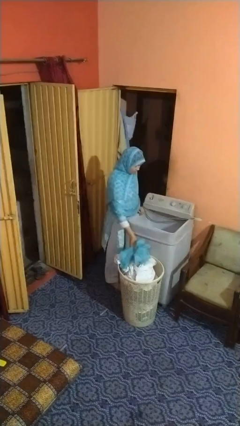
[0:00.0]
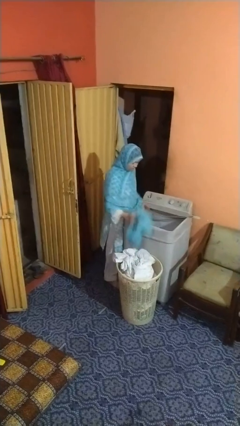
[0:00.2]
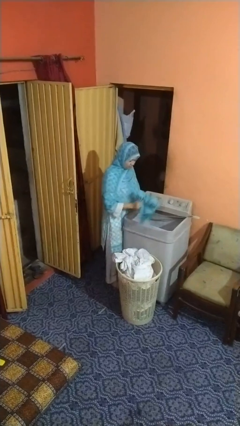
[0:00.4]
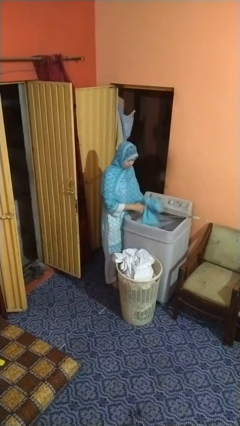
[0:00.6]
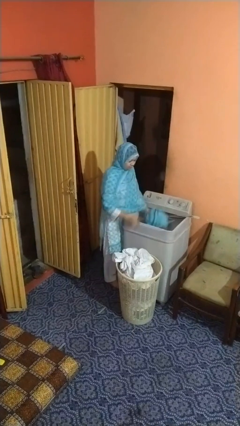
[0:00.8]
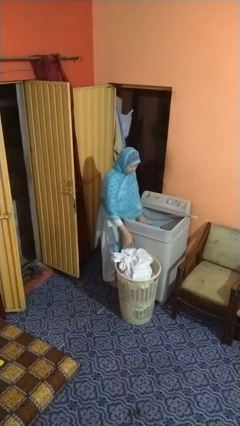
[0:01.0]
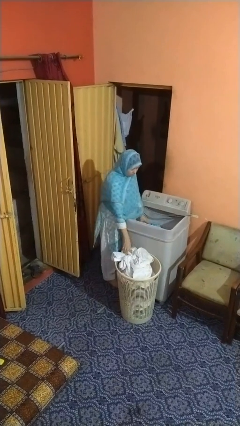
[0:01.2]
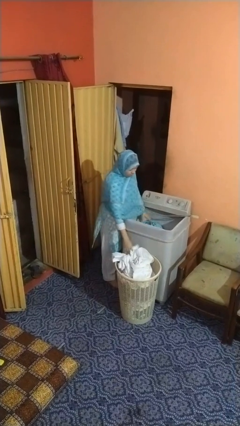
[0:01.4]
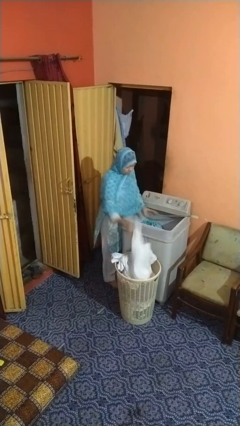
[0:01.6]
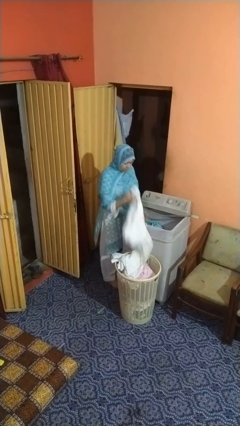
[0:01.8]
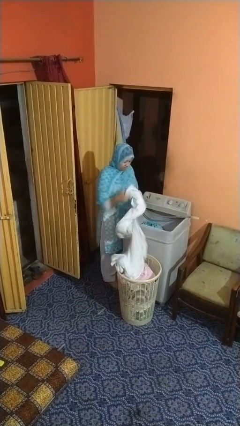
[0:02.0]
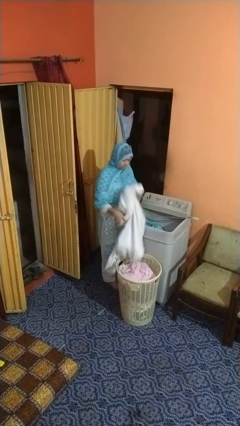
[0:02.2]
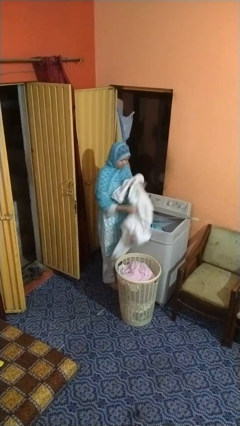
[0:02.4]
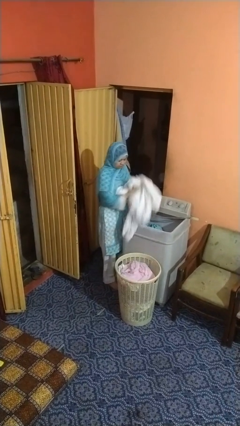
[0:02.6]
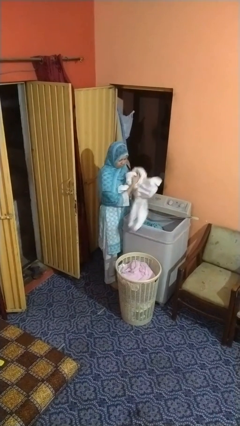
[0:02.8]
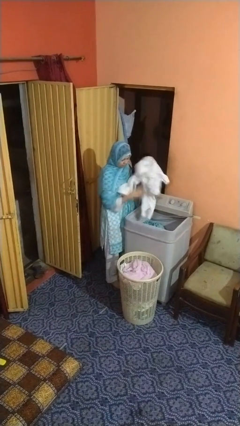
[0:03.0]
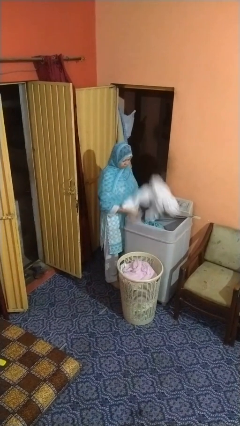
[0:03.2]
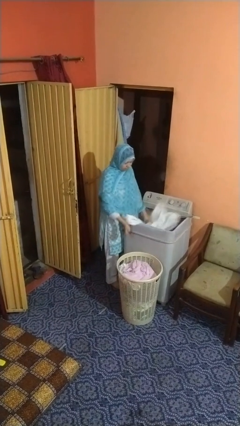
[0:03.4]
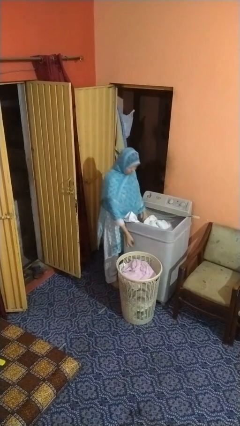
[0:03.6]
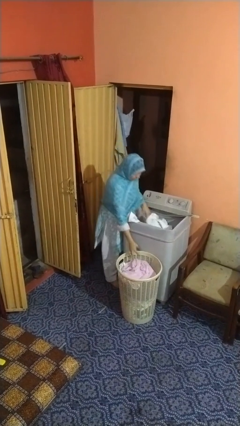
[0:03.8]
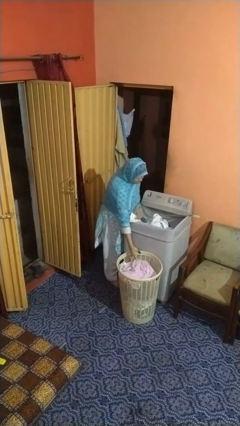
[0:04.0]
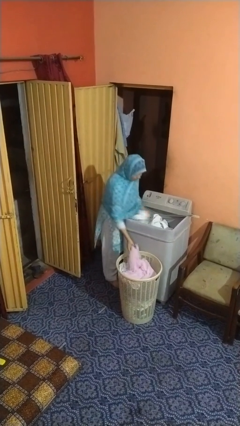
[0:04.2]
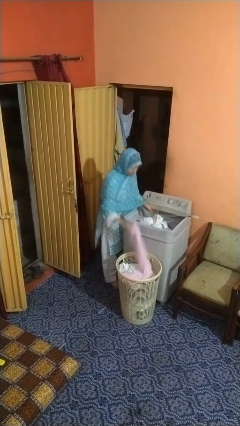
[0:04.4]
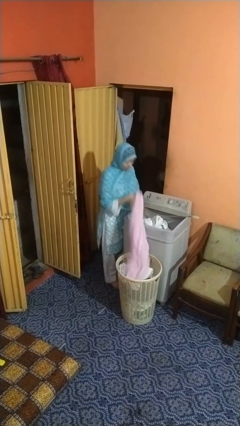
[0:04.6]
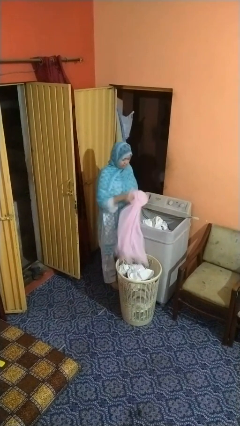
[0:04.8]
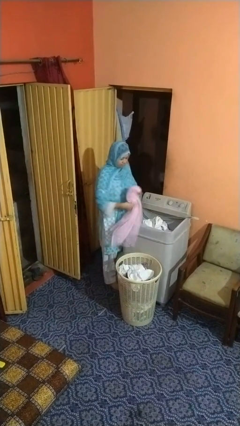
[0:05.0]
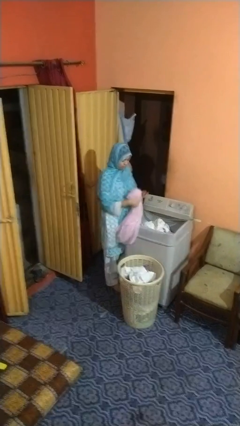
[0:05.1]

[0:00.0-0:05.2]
person loads clotheswasher

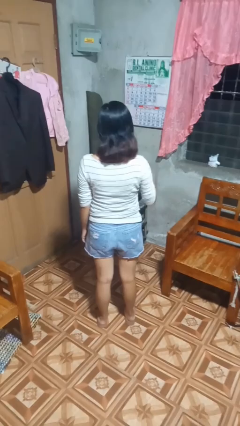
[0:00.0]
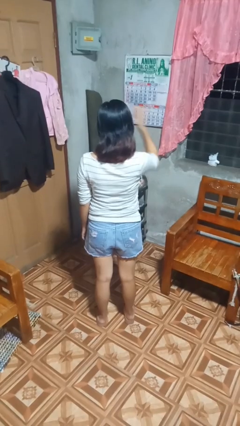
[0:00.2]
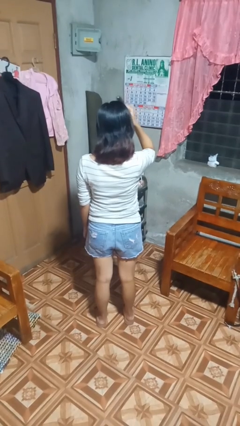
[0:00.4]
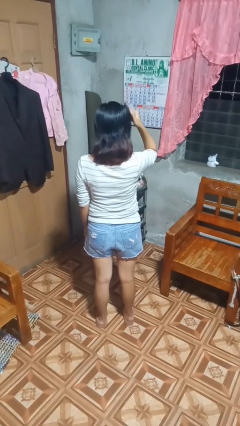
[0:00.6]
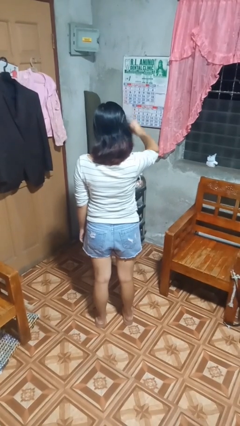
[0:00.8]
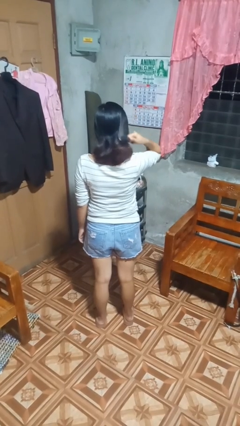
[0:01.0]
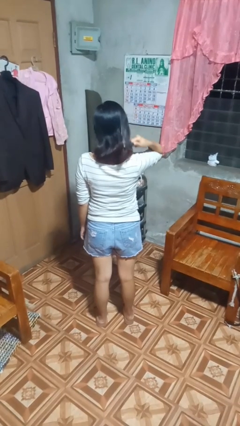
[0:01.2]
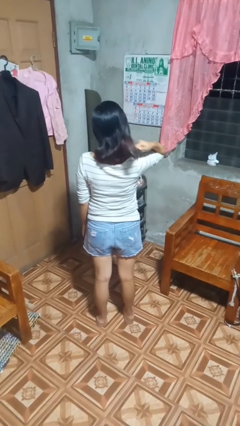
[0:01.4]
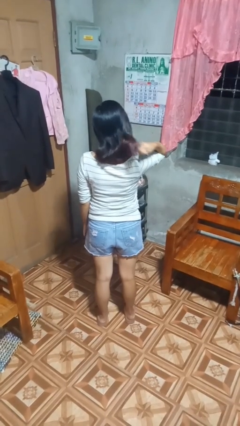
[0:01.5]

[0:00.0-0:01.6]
person brushes hair

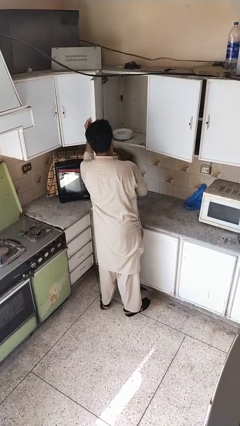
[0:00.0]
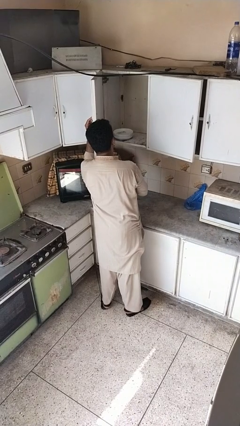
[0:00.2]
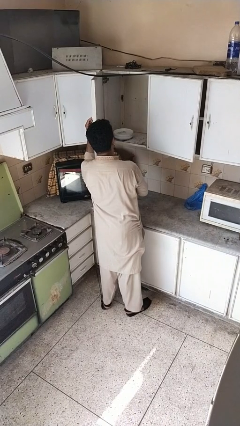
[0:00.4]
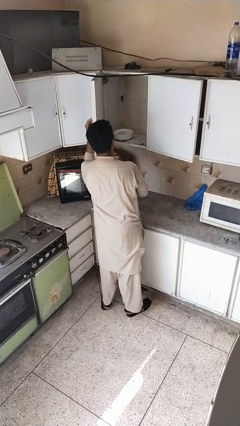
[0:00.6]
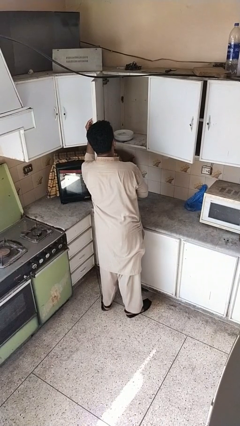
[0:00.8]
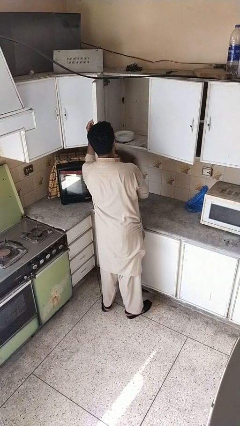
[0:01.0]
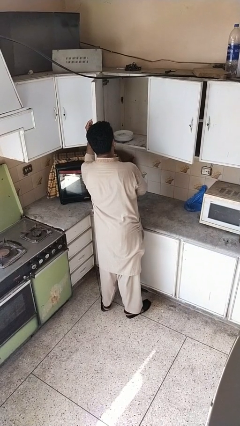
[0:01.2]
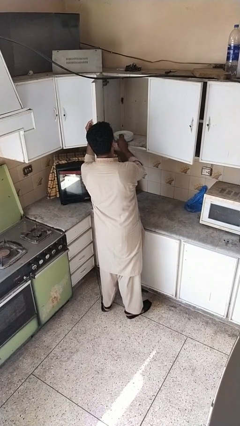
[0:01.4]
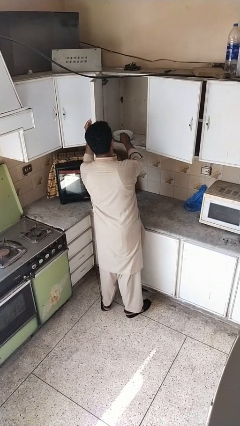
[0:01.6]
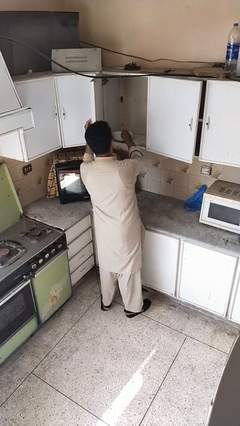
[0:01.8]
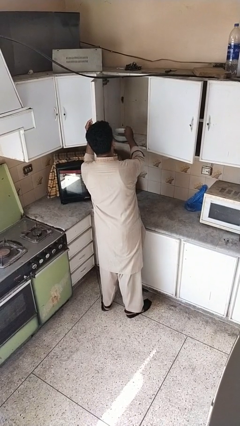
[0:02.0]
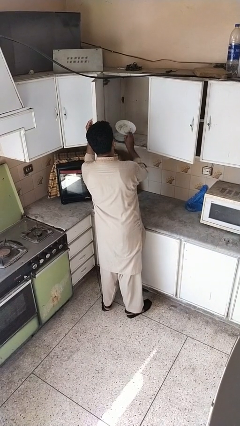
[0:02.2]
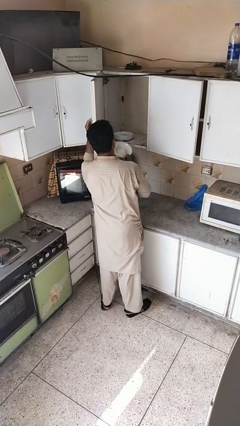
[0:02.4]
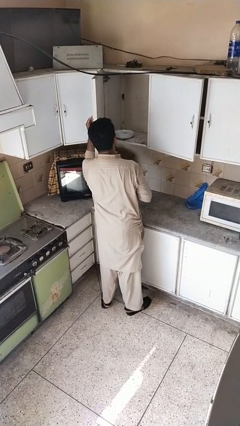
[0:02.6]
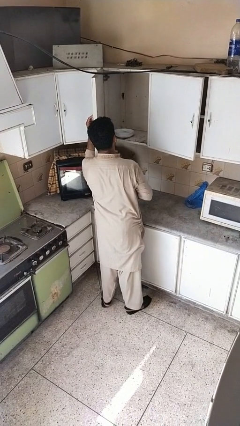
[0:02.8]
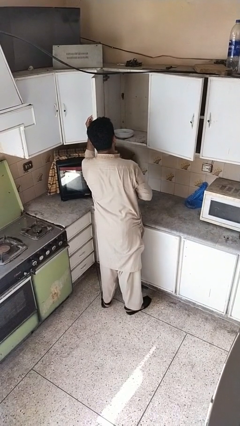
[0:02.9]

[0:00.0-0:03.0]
person takes object from cabinet

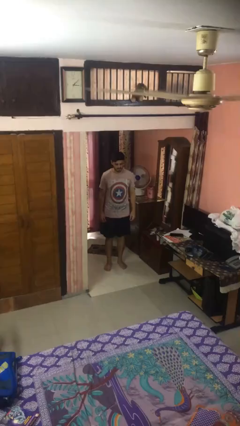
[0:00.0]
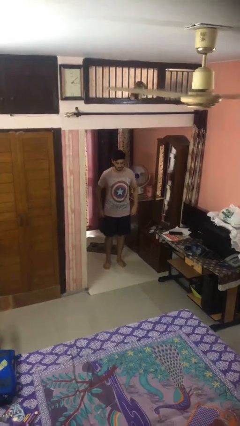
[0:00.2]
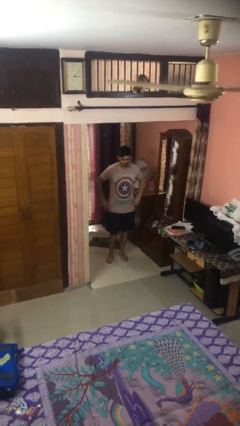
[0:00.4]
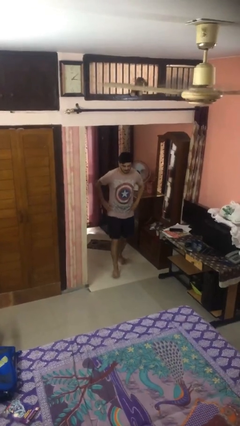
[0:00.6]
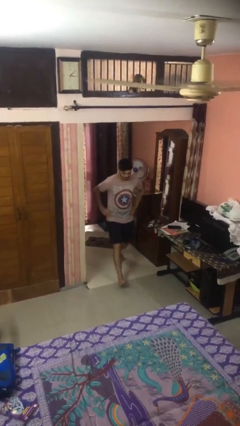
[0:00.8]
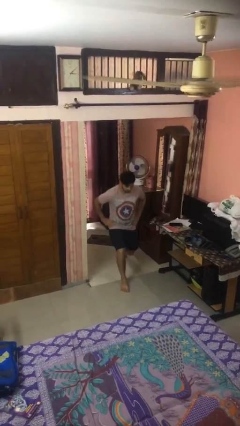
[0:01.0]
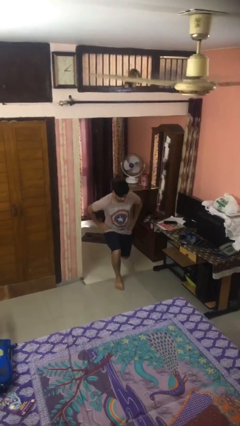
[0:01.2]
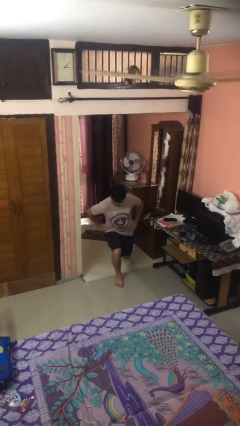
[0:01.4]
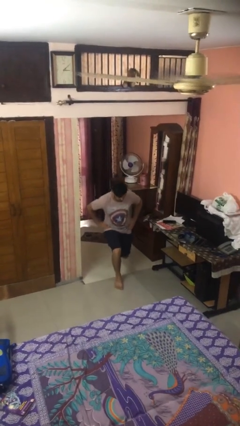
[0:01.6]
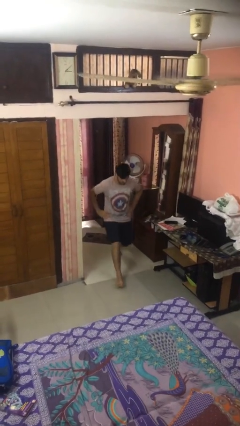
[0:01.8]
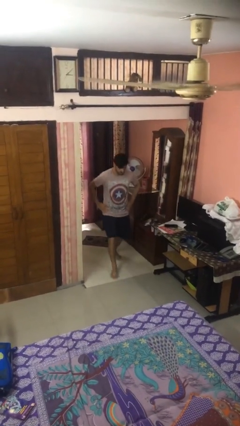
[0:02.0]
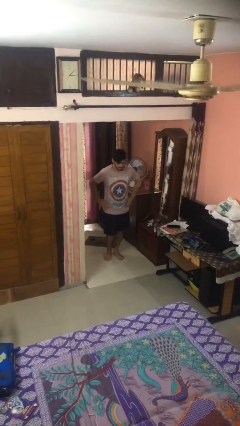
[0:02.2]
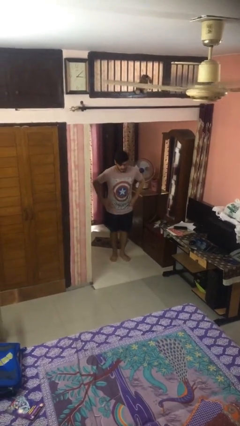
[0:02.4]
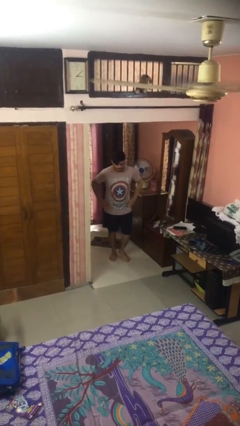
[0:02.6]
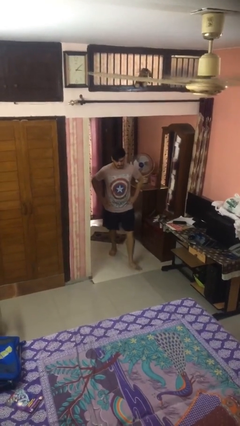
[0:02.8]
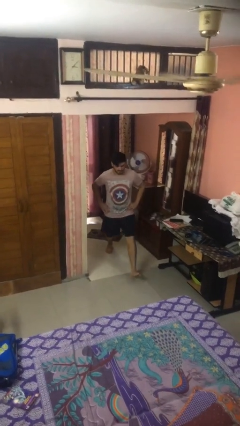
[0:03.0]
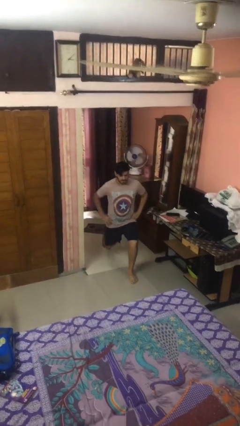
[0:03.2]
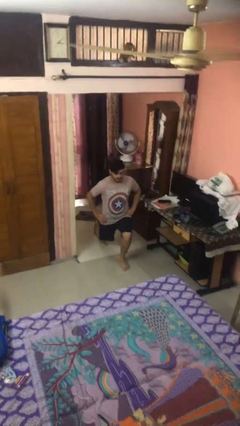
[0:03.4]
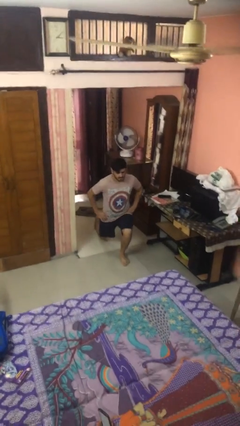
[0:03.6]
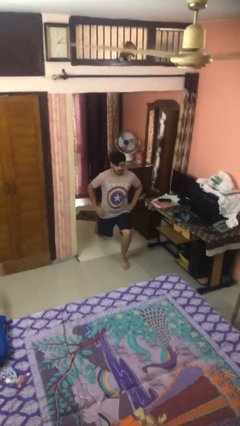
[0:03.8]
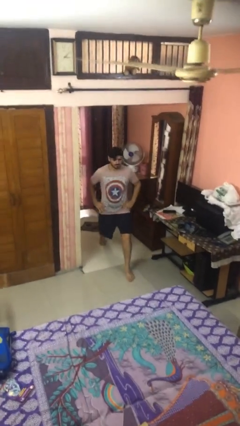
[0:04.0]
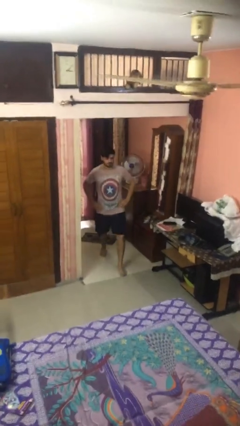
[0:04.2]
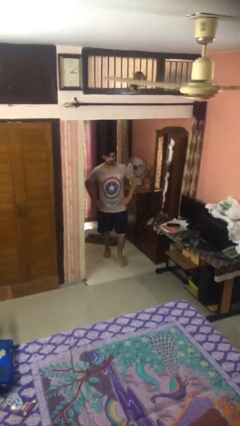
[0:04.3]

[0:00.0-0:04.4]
person exercises with lunges

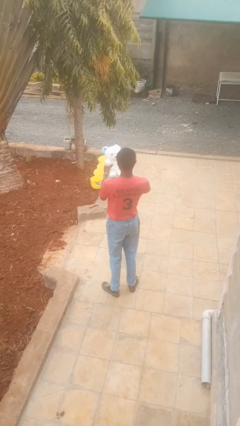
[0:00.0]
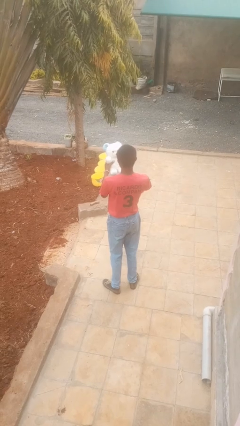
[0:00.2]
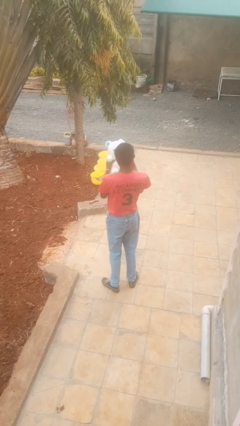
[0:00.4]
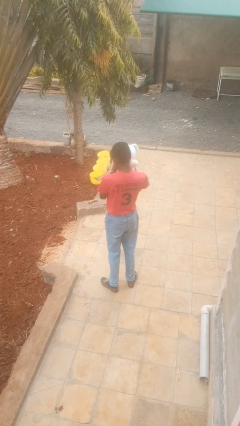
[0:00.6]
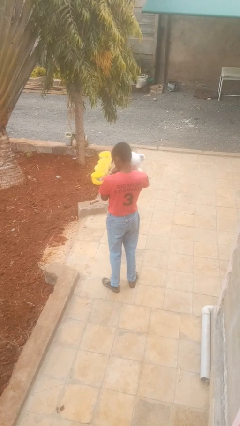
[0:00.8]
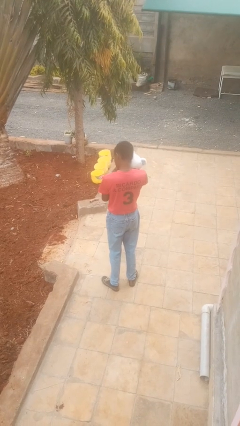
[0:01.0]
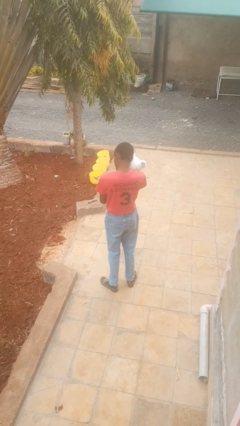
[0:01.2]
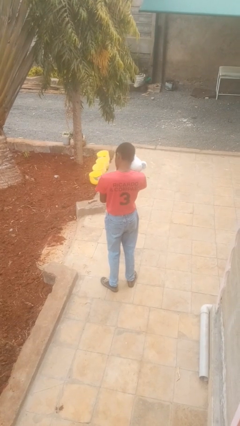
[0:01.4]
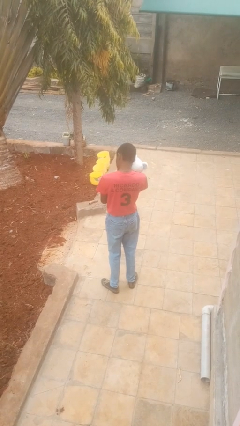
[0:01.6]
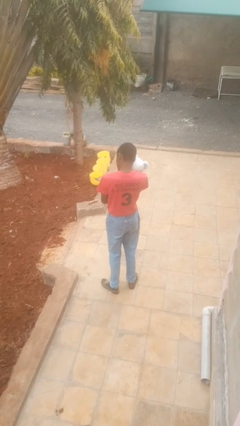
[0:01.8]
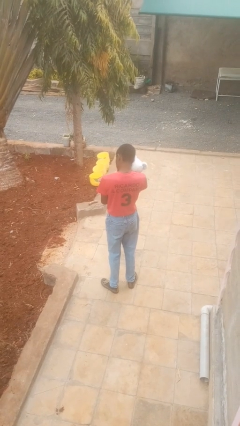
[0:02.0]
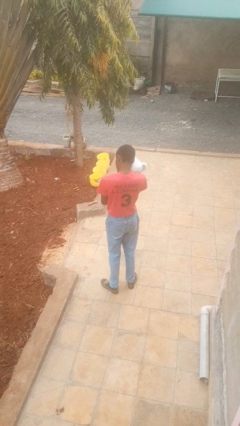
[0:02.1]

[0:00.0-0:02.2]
person hugs stuffed animal

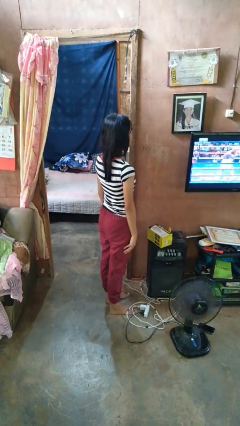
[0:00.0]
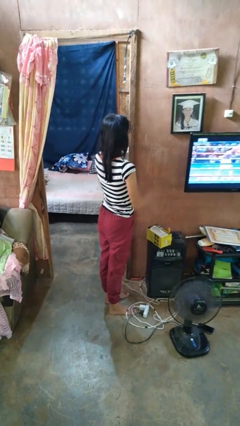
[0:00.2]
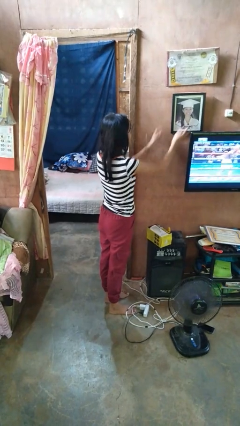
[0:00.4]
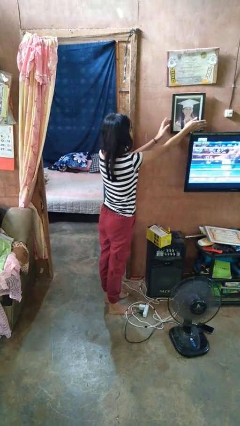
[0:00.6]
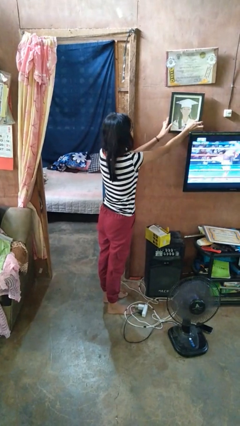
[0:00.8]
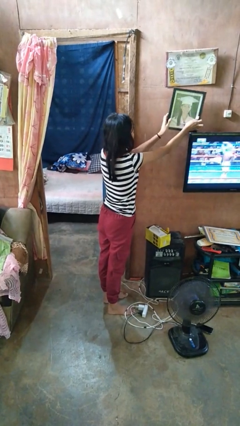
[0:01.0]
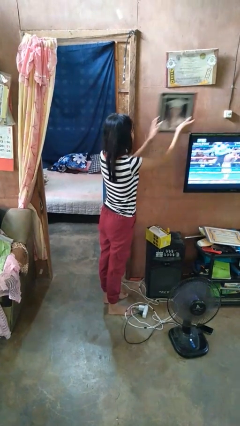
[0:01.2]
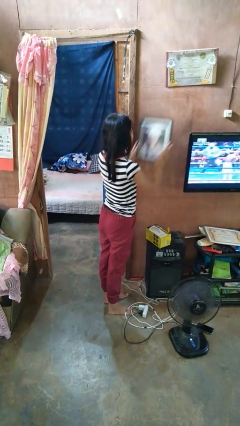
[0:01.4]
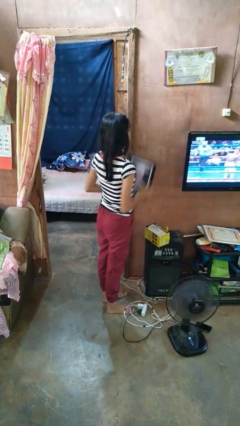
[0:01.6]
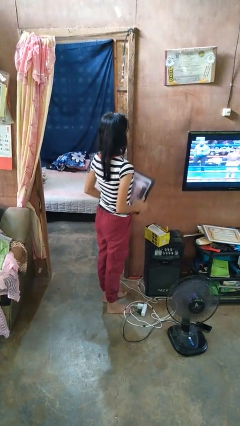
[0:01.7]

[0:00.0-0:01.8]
person takes down picture frame
